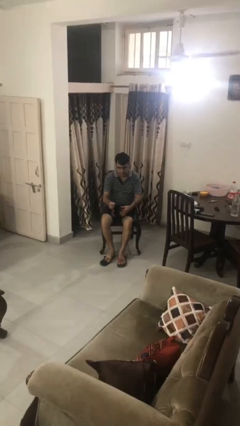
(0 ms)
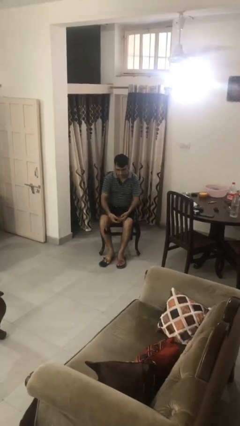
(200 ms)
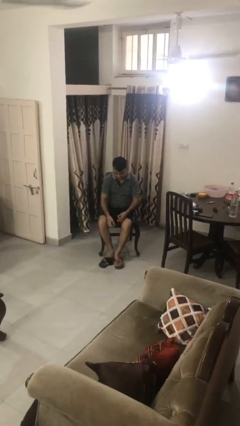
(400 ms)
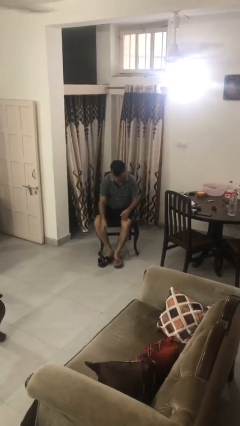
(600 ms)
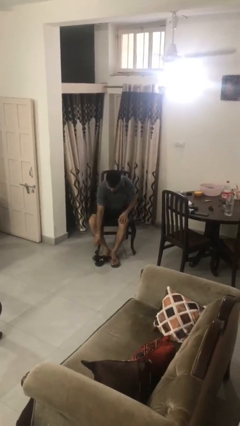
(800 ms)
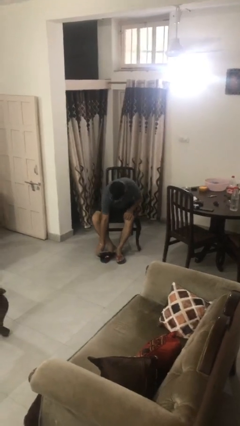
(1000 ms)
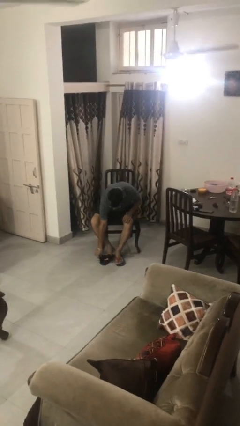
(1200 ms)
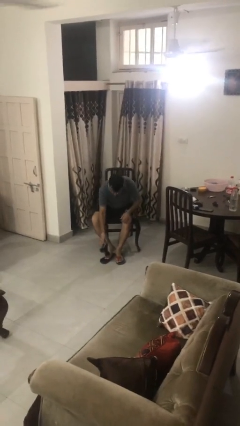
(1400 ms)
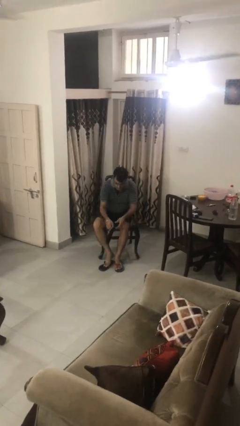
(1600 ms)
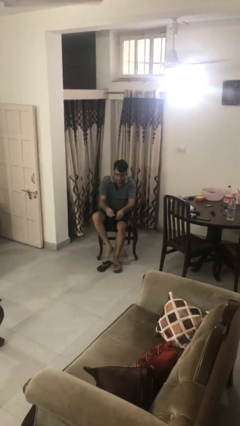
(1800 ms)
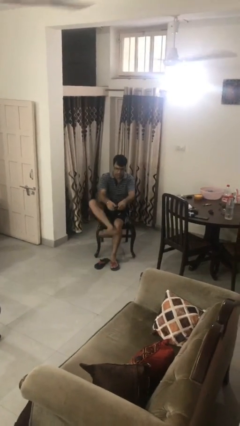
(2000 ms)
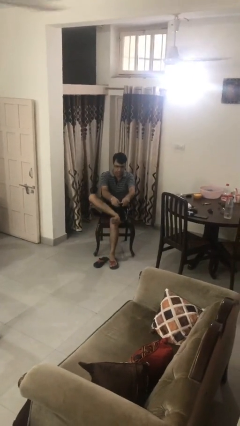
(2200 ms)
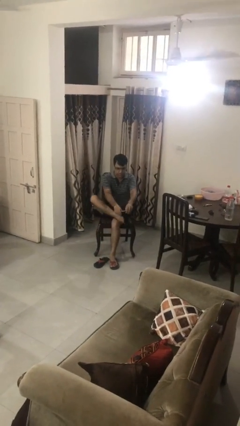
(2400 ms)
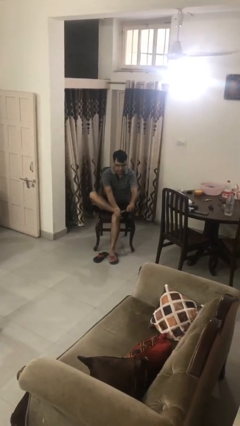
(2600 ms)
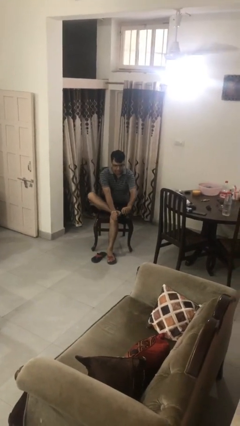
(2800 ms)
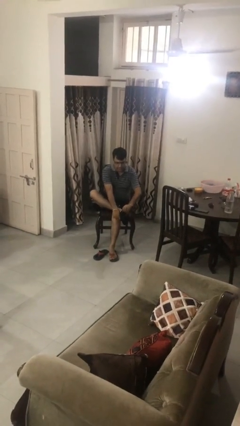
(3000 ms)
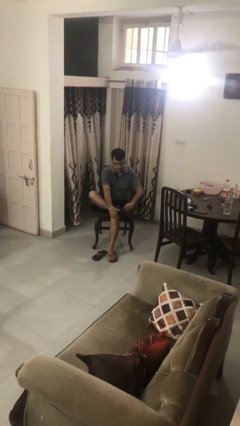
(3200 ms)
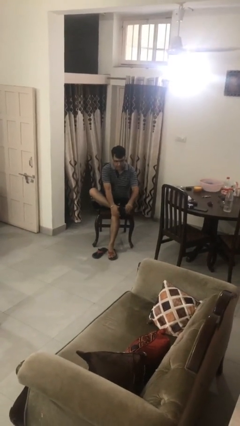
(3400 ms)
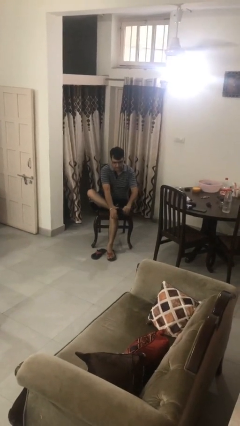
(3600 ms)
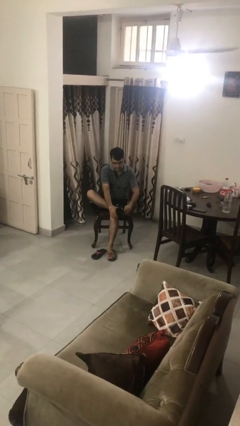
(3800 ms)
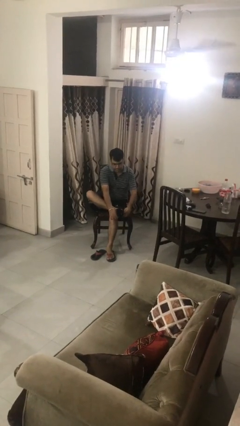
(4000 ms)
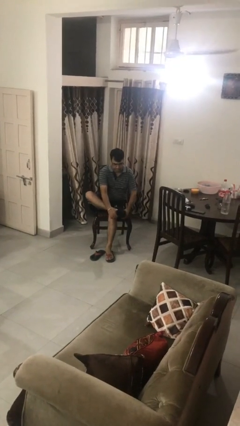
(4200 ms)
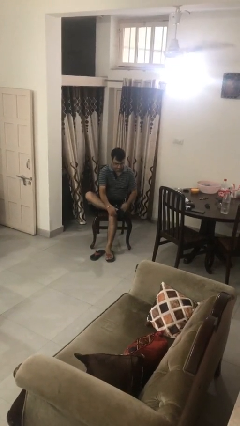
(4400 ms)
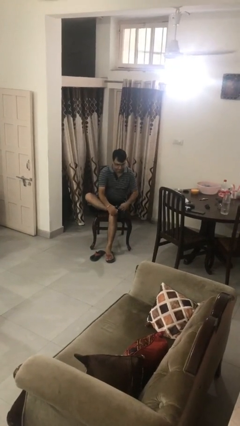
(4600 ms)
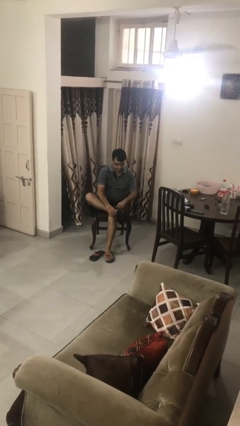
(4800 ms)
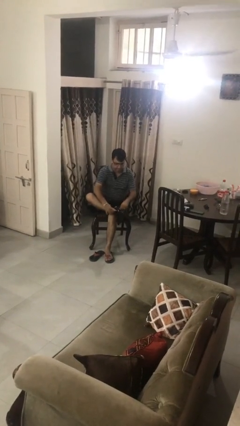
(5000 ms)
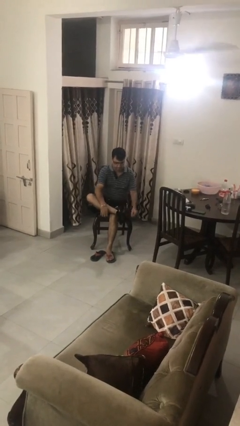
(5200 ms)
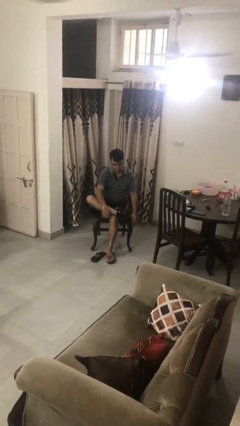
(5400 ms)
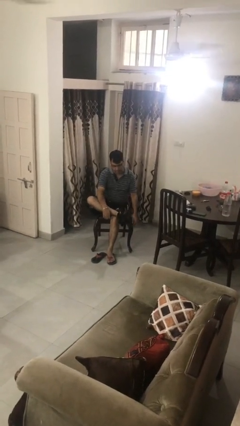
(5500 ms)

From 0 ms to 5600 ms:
person puts on socks

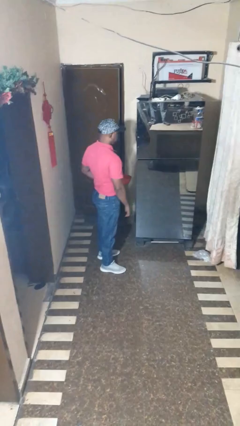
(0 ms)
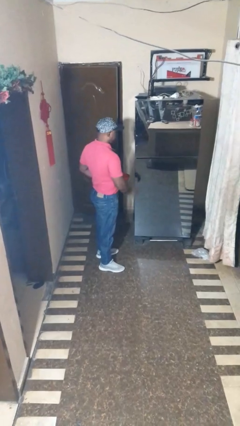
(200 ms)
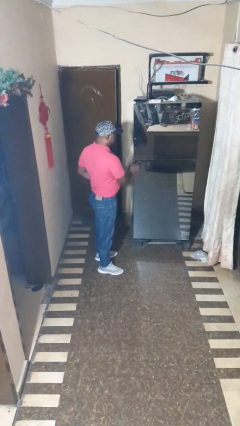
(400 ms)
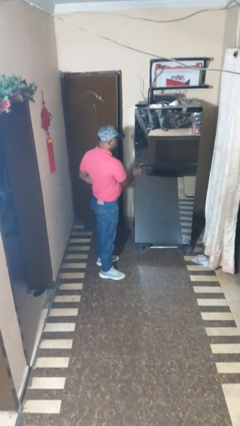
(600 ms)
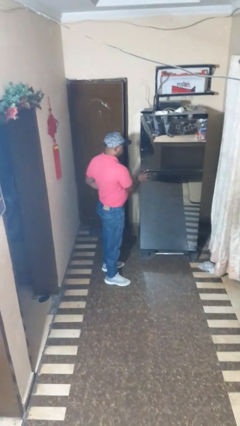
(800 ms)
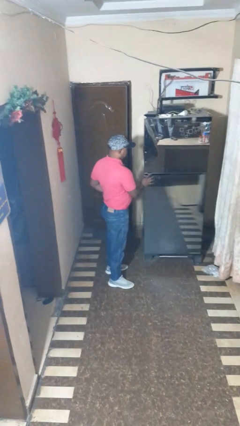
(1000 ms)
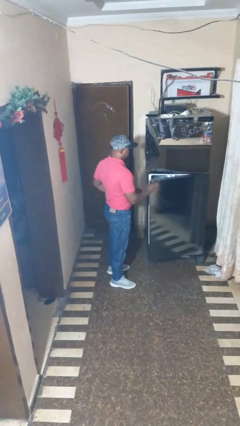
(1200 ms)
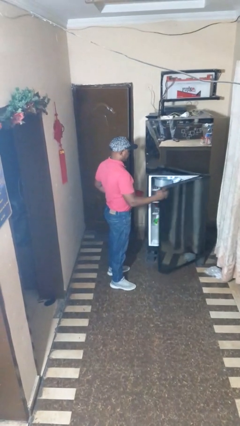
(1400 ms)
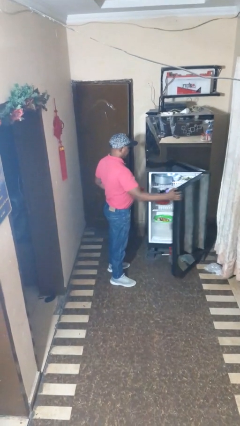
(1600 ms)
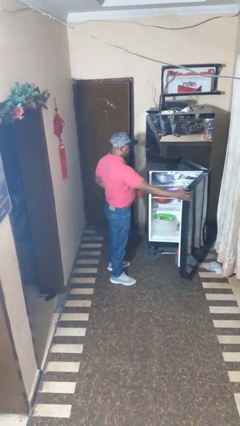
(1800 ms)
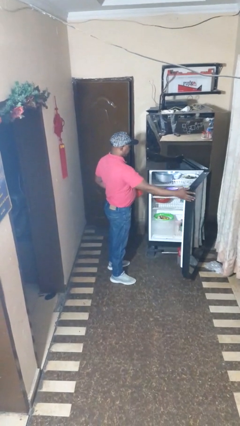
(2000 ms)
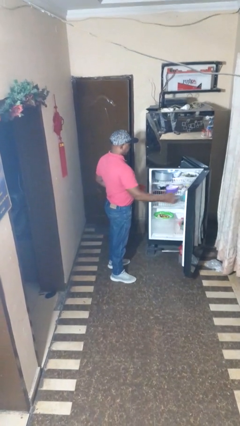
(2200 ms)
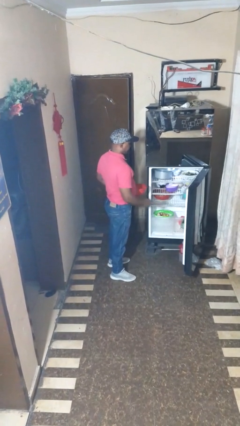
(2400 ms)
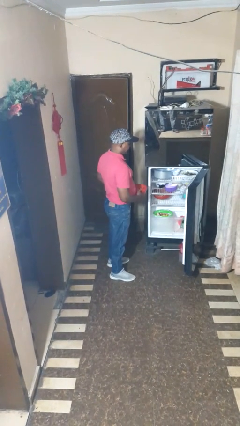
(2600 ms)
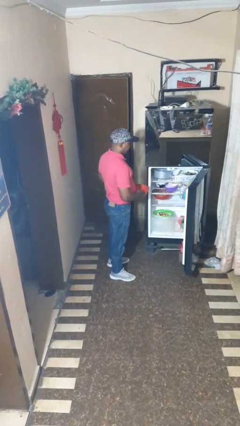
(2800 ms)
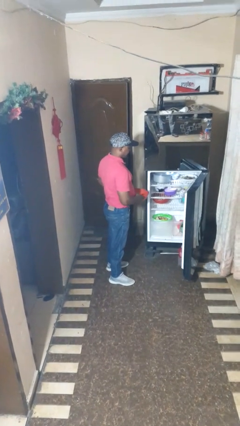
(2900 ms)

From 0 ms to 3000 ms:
person opens refrigerator

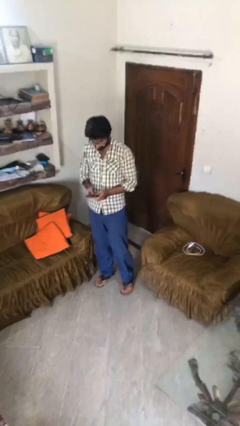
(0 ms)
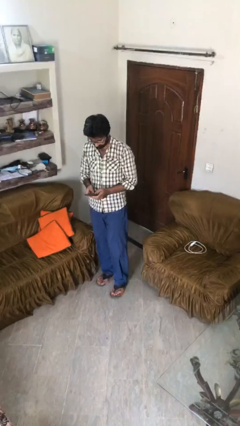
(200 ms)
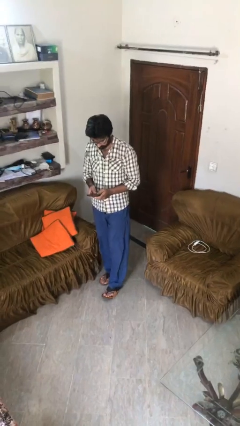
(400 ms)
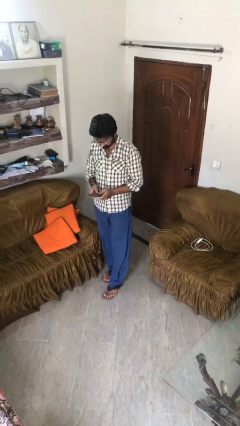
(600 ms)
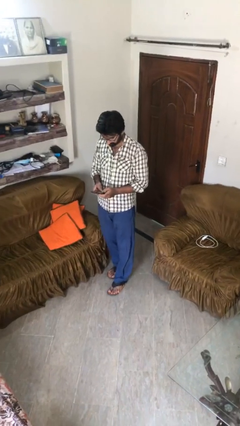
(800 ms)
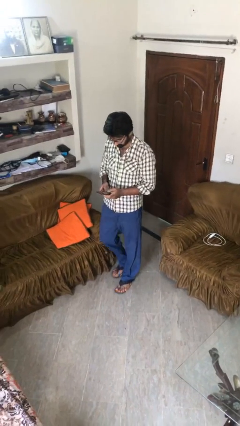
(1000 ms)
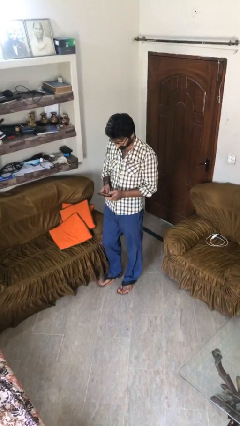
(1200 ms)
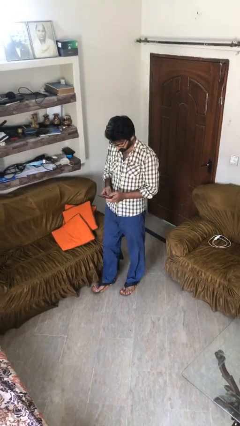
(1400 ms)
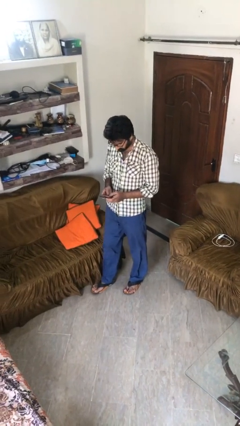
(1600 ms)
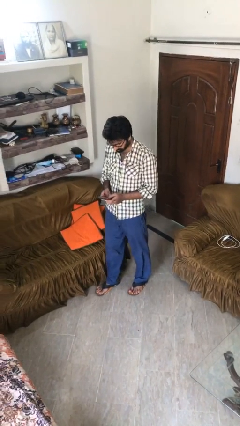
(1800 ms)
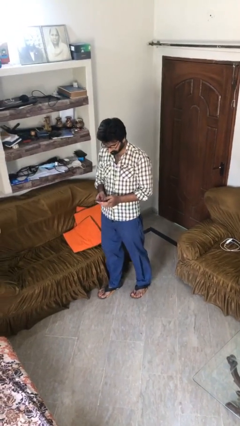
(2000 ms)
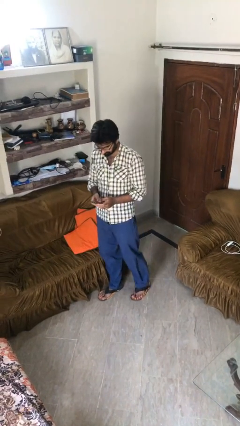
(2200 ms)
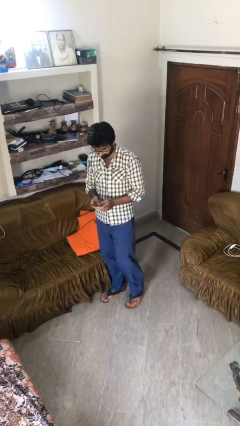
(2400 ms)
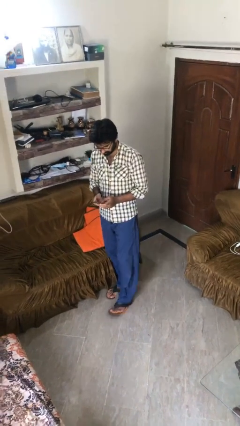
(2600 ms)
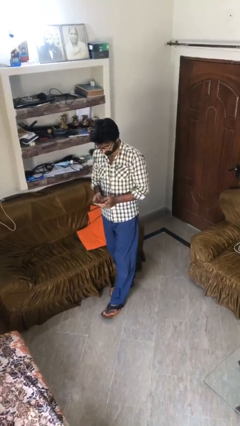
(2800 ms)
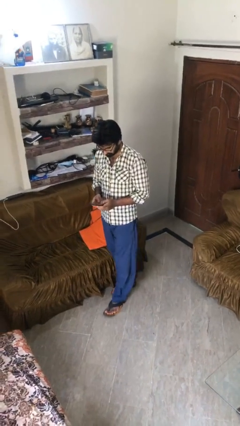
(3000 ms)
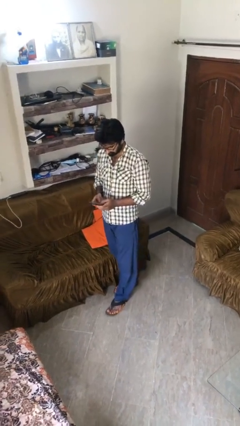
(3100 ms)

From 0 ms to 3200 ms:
person texts on phone

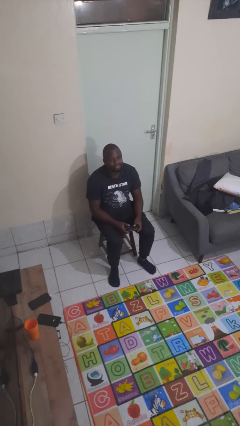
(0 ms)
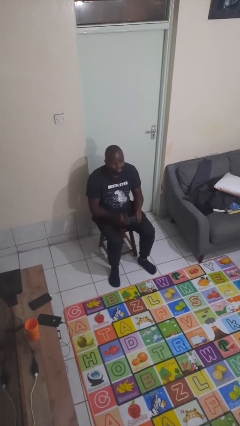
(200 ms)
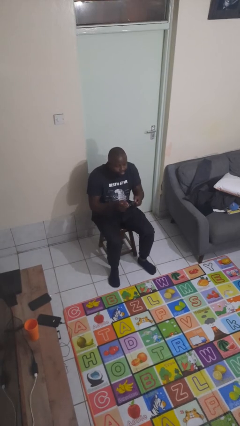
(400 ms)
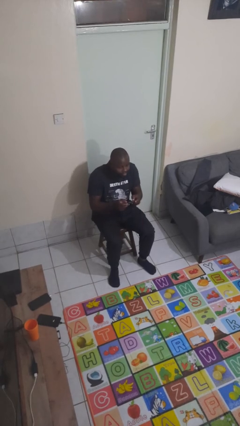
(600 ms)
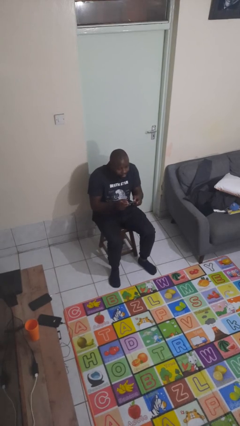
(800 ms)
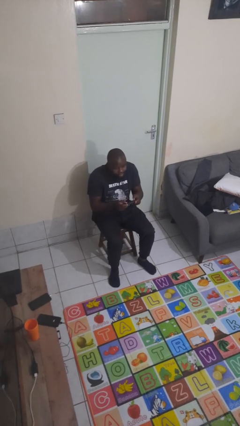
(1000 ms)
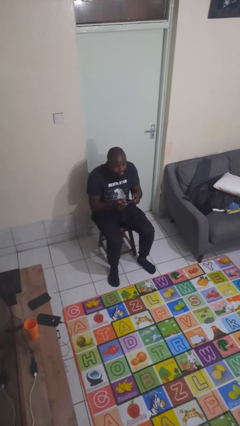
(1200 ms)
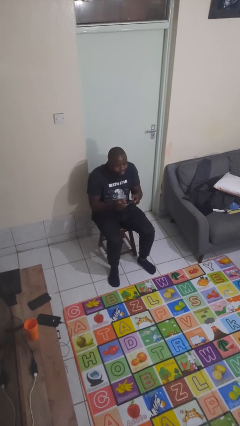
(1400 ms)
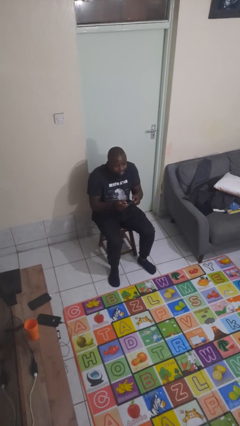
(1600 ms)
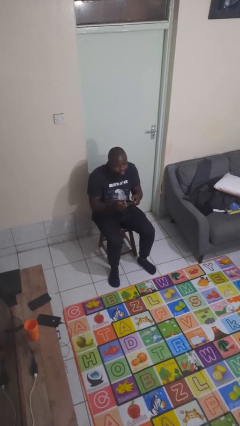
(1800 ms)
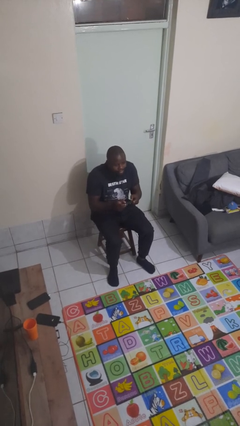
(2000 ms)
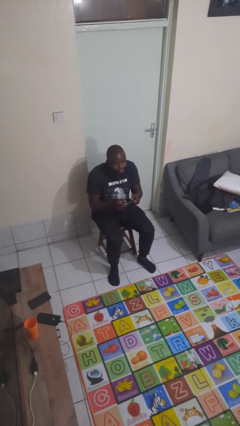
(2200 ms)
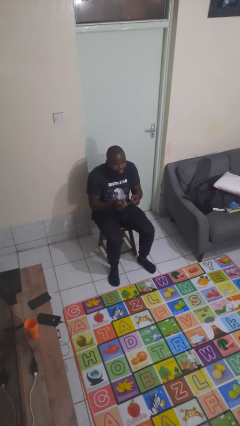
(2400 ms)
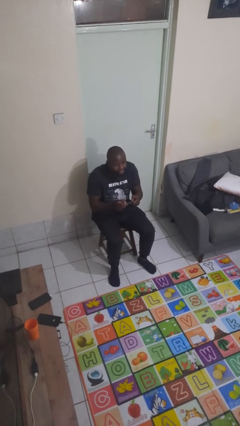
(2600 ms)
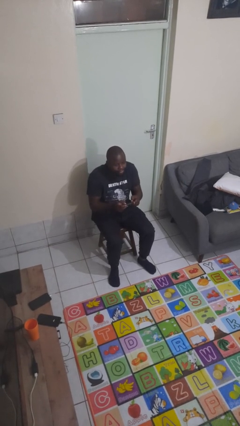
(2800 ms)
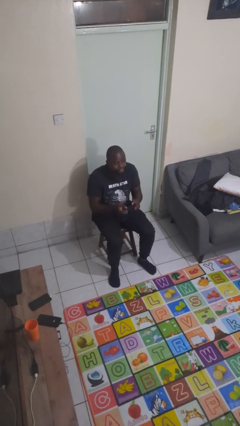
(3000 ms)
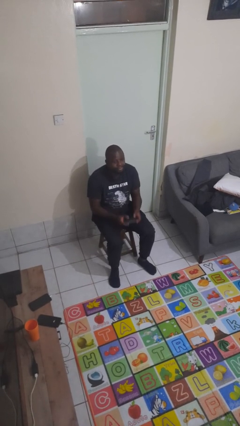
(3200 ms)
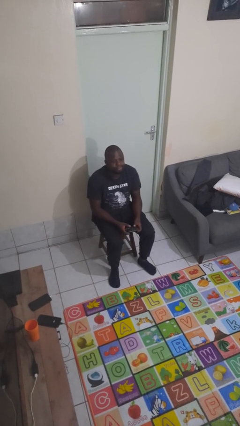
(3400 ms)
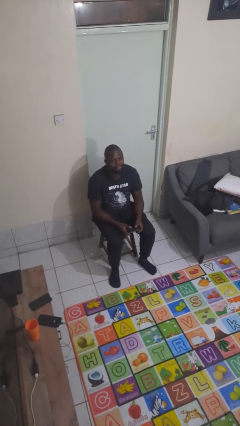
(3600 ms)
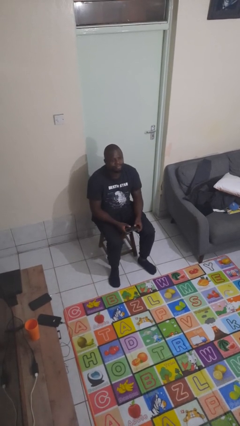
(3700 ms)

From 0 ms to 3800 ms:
person interacts with handheld game

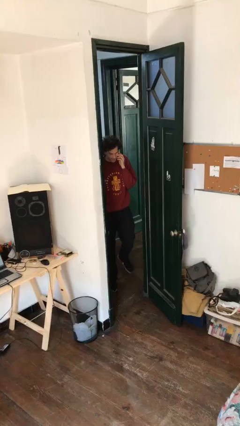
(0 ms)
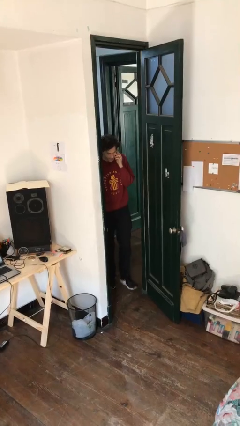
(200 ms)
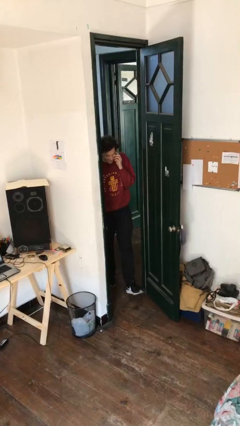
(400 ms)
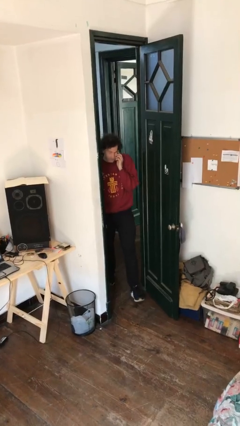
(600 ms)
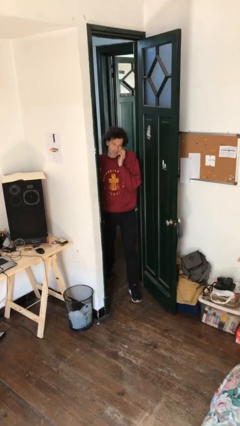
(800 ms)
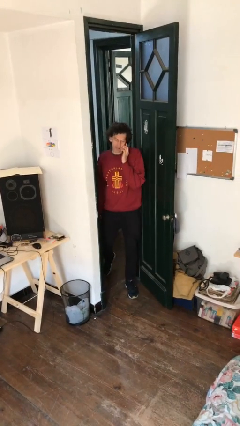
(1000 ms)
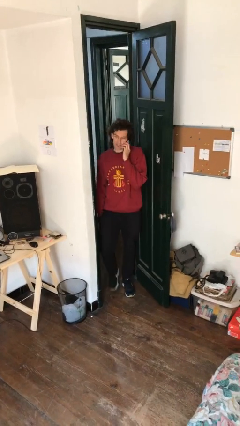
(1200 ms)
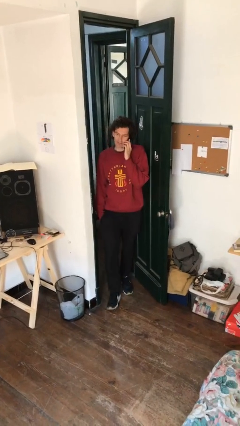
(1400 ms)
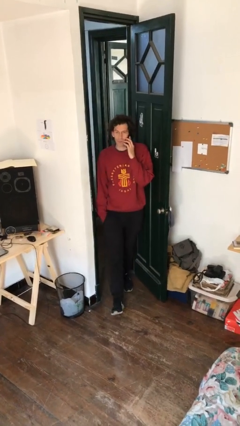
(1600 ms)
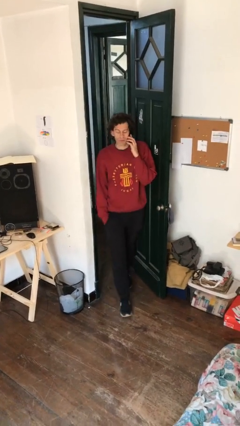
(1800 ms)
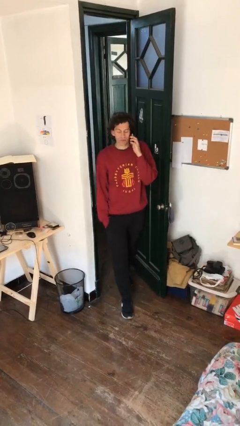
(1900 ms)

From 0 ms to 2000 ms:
person enters scene through structure

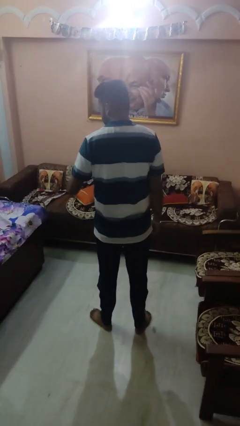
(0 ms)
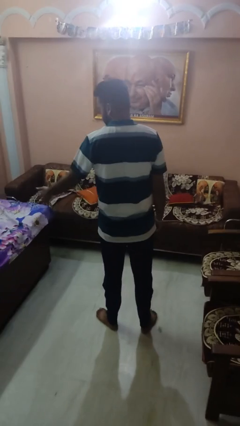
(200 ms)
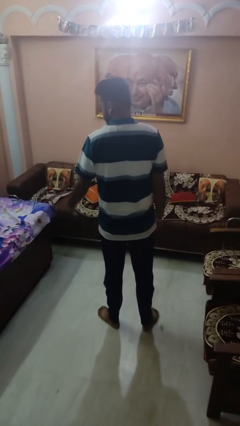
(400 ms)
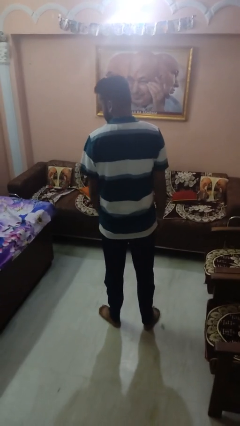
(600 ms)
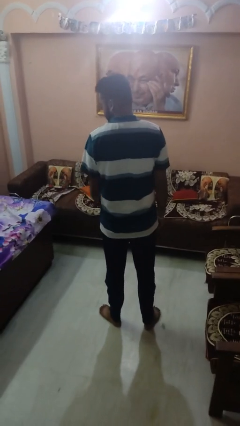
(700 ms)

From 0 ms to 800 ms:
person throws object on bed
